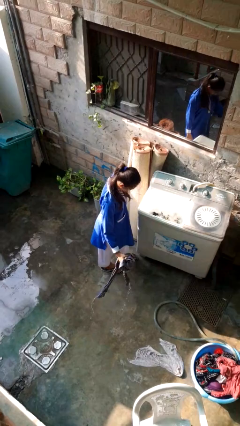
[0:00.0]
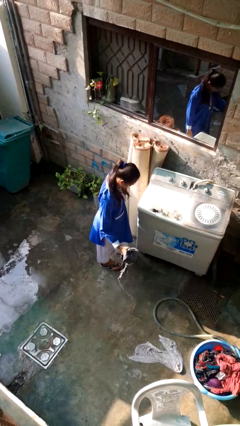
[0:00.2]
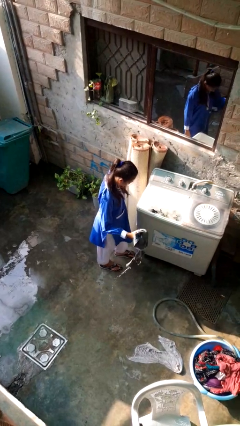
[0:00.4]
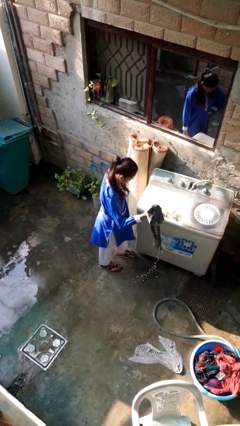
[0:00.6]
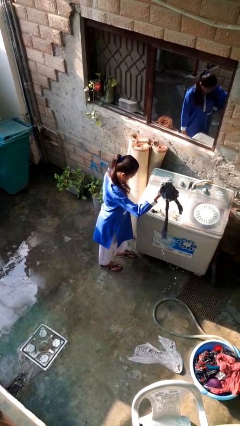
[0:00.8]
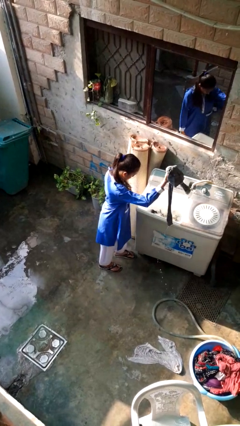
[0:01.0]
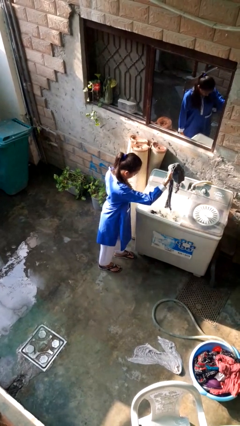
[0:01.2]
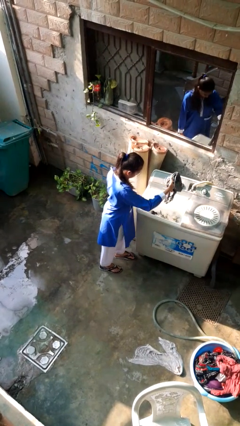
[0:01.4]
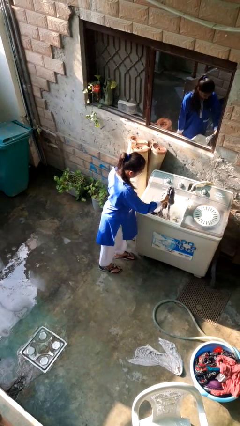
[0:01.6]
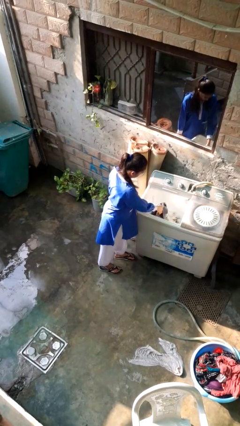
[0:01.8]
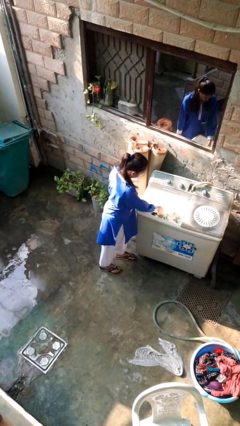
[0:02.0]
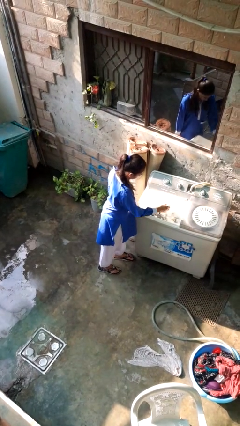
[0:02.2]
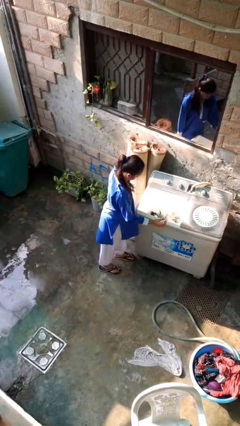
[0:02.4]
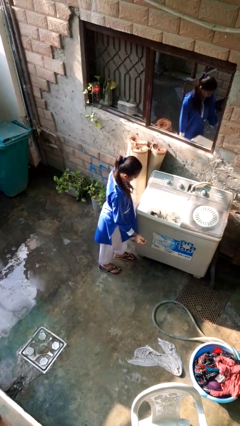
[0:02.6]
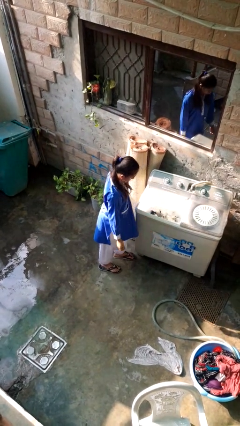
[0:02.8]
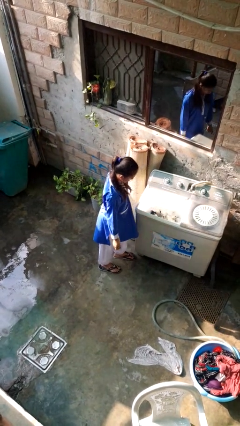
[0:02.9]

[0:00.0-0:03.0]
person loads clotheswasher

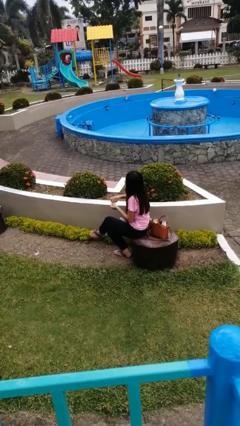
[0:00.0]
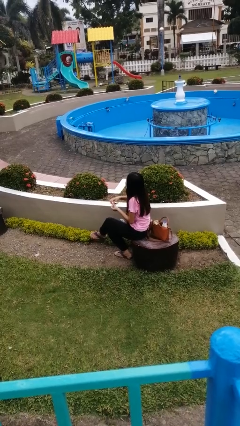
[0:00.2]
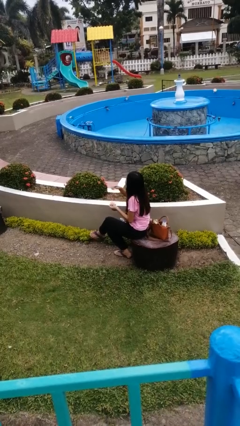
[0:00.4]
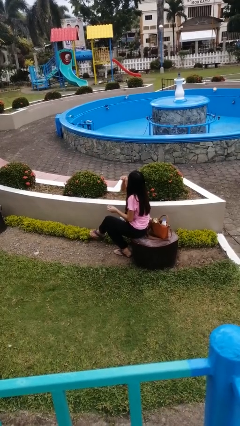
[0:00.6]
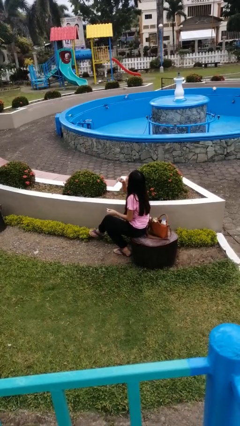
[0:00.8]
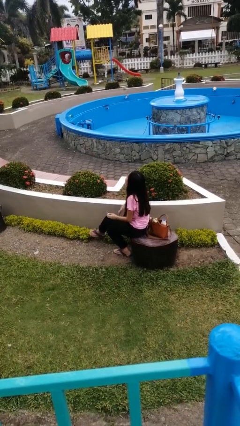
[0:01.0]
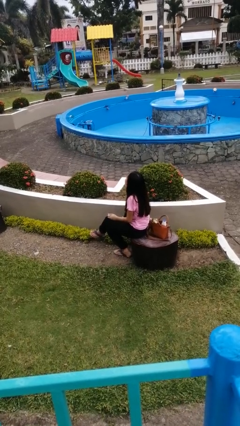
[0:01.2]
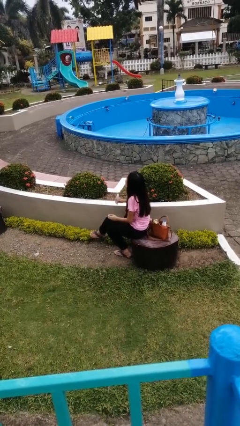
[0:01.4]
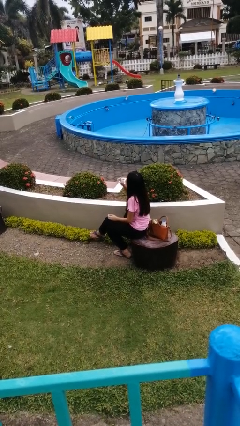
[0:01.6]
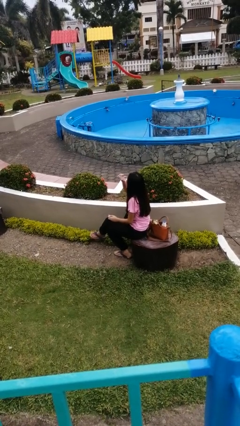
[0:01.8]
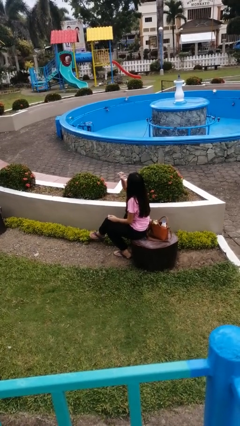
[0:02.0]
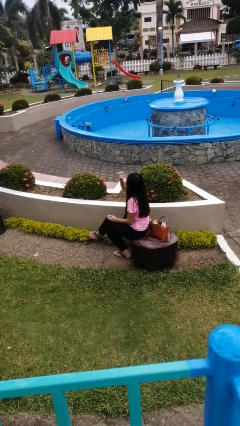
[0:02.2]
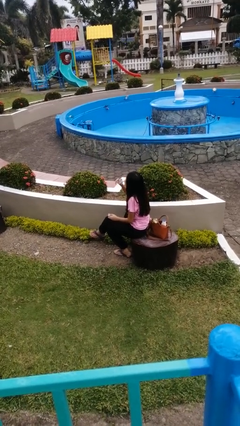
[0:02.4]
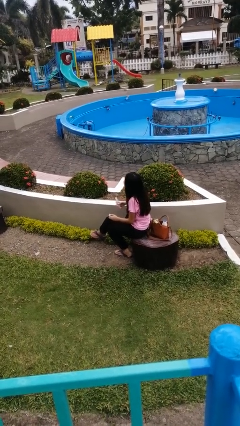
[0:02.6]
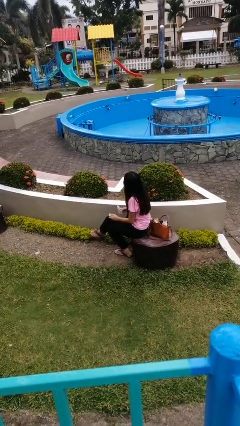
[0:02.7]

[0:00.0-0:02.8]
person drinks from cup

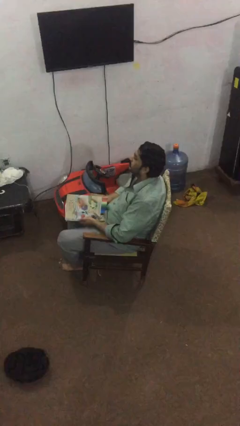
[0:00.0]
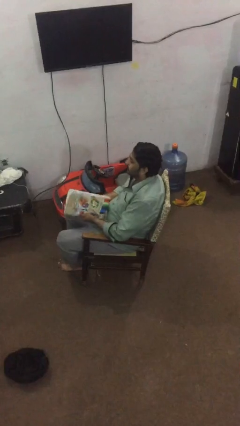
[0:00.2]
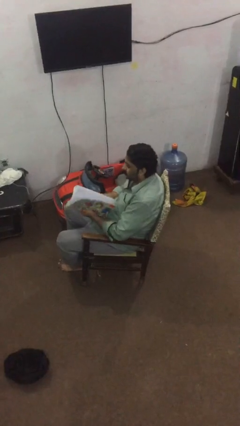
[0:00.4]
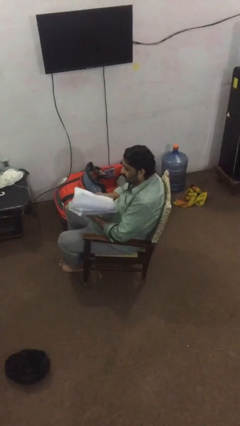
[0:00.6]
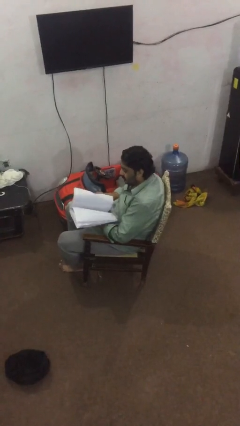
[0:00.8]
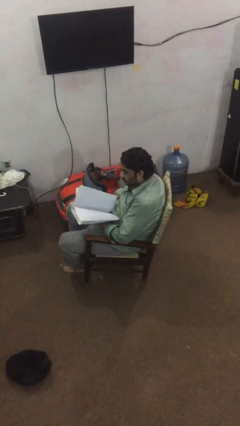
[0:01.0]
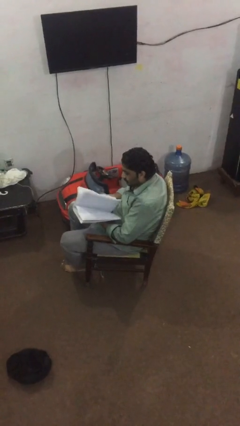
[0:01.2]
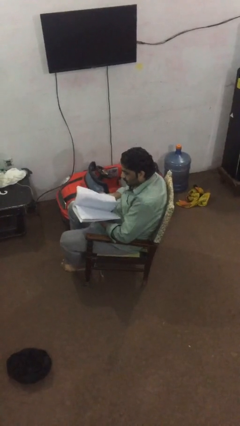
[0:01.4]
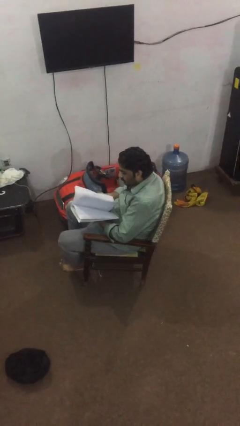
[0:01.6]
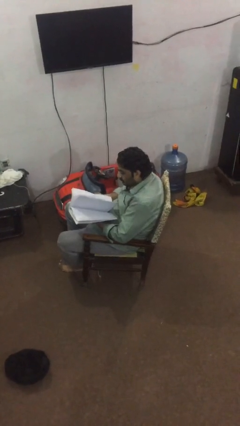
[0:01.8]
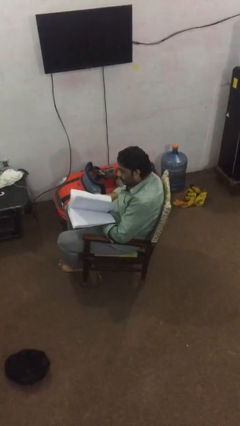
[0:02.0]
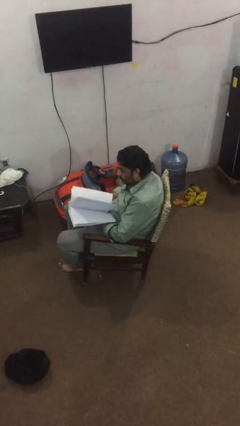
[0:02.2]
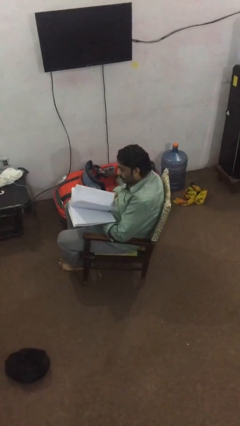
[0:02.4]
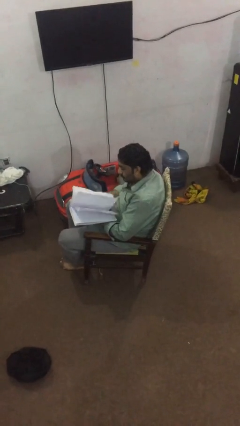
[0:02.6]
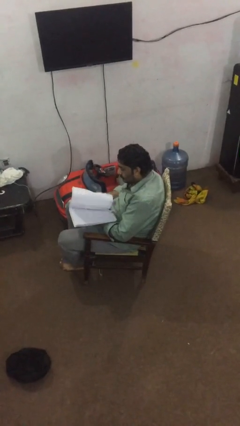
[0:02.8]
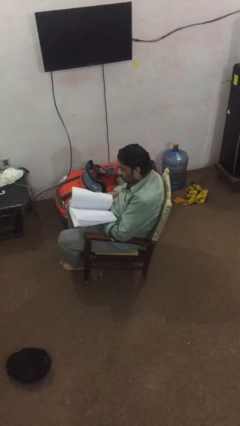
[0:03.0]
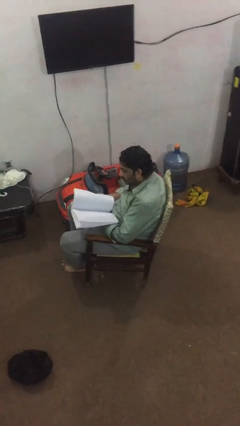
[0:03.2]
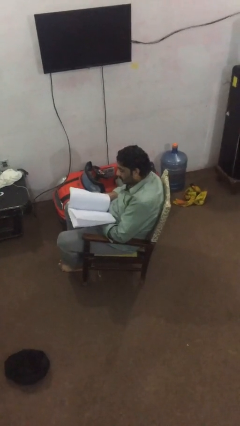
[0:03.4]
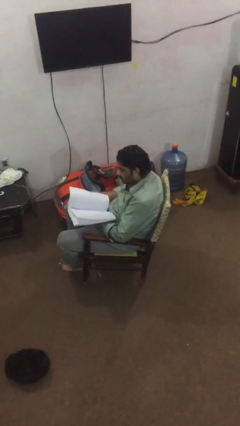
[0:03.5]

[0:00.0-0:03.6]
person reads document

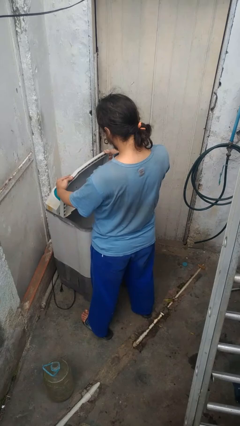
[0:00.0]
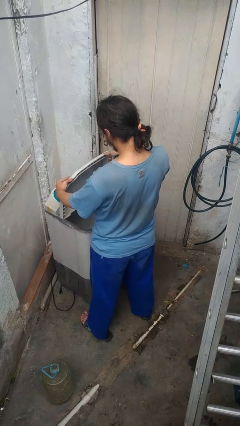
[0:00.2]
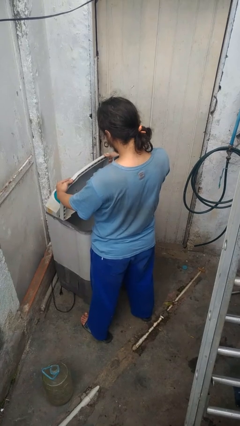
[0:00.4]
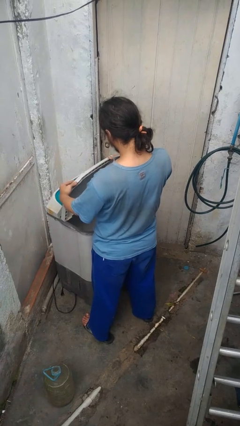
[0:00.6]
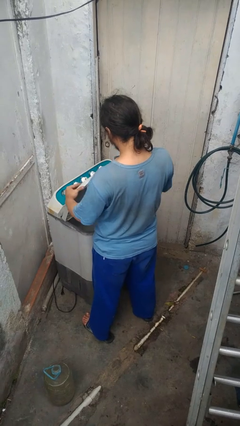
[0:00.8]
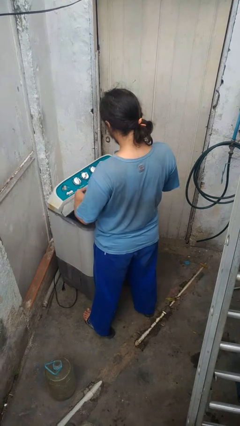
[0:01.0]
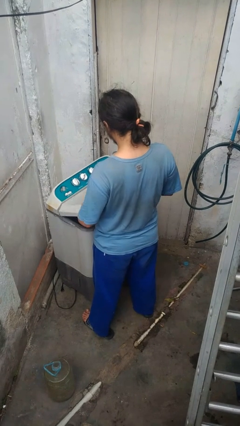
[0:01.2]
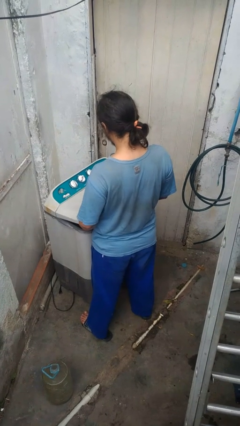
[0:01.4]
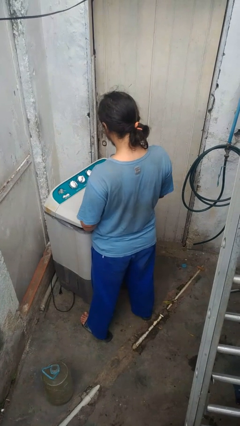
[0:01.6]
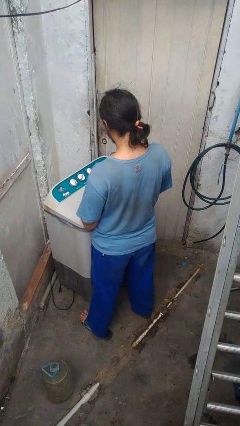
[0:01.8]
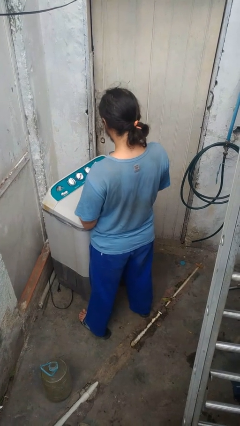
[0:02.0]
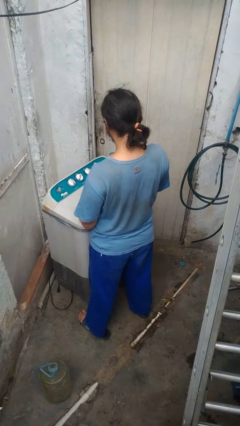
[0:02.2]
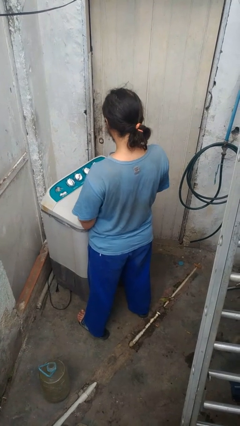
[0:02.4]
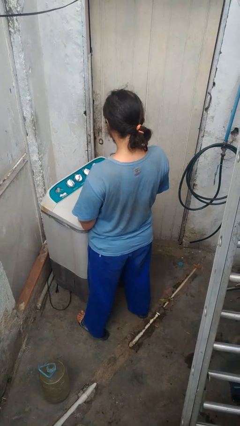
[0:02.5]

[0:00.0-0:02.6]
person closes clothes washer

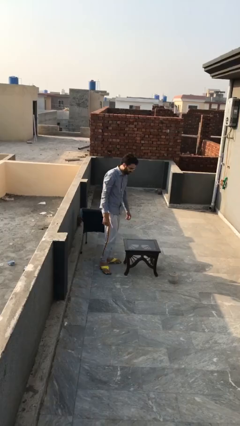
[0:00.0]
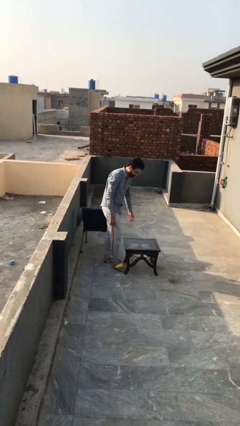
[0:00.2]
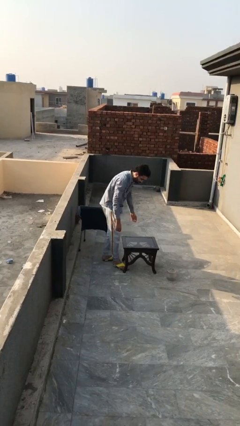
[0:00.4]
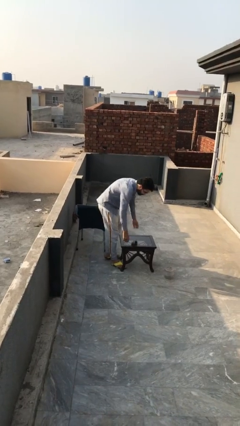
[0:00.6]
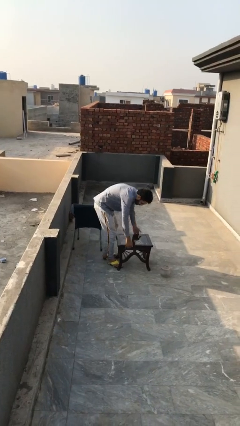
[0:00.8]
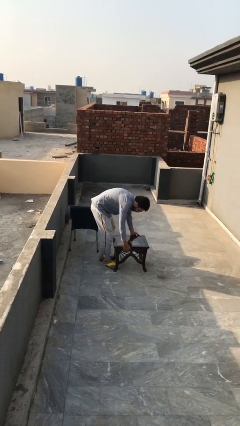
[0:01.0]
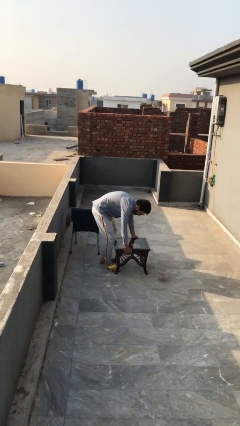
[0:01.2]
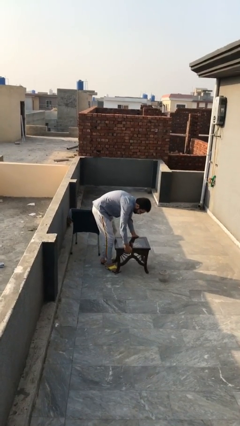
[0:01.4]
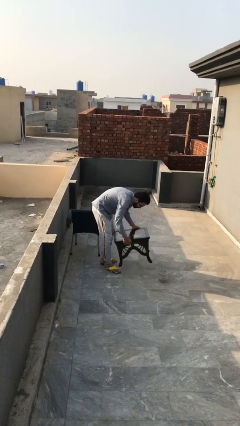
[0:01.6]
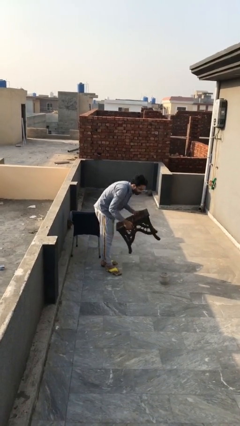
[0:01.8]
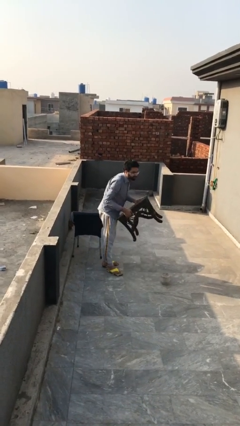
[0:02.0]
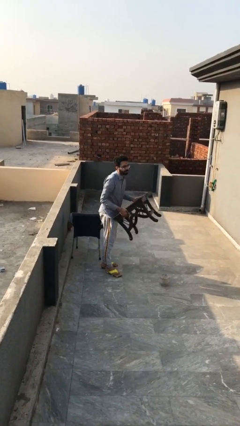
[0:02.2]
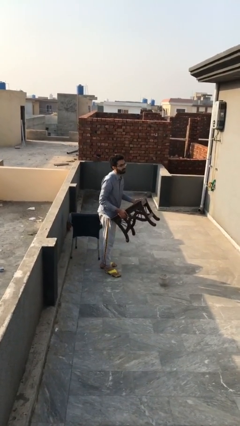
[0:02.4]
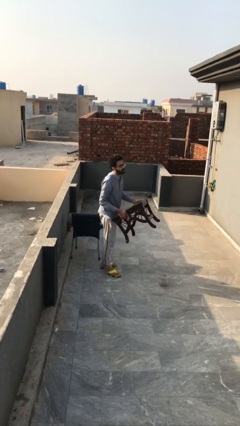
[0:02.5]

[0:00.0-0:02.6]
person picks up object from floor

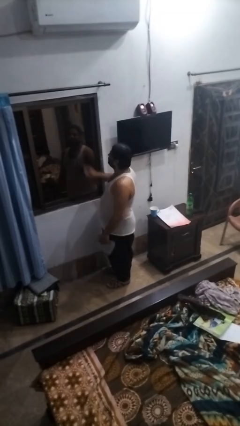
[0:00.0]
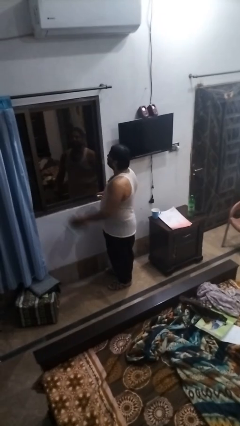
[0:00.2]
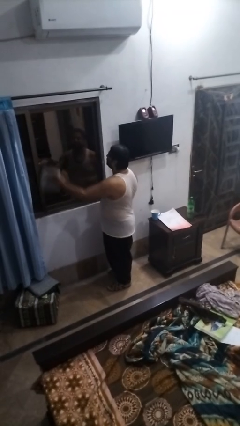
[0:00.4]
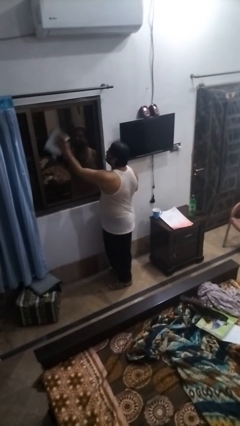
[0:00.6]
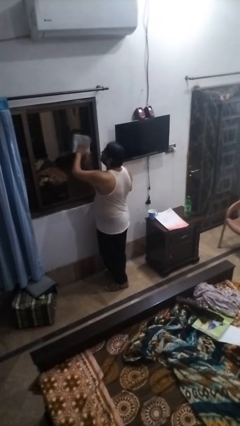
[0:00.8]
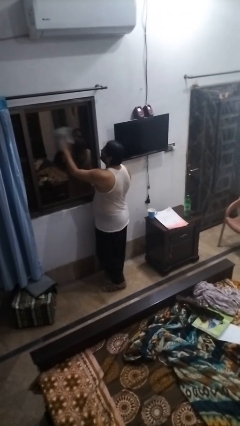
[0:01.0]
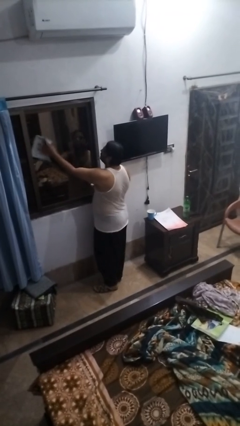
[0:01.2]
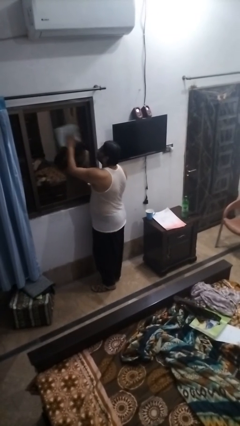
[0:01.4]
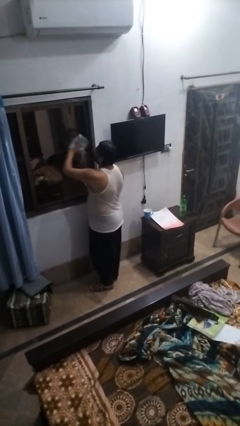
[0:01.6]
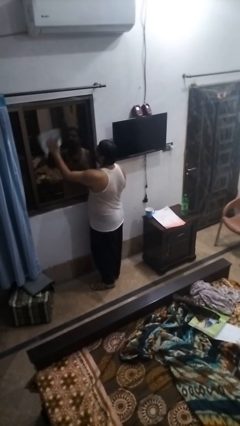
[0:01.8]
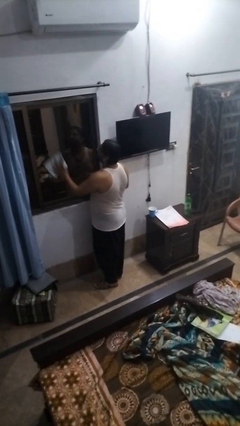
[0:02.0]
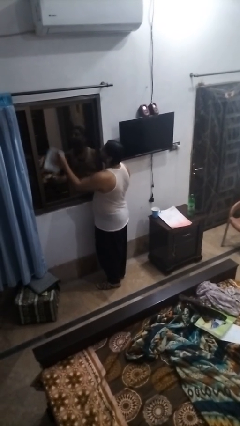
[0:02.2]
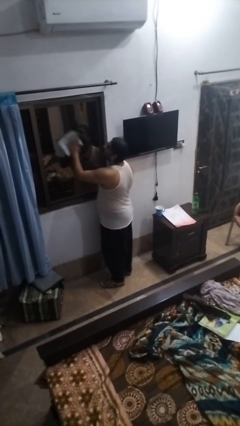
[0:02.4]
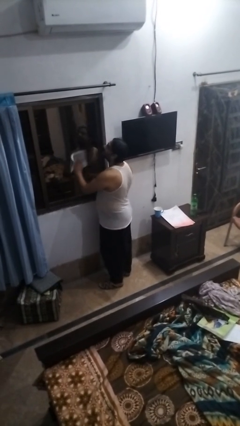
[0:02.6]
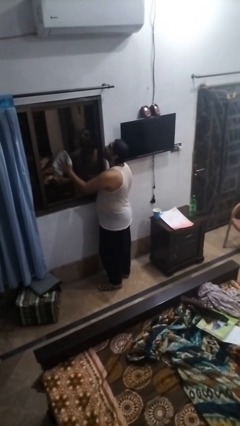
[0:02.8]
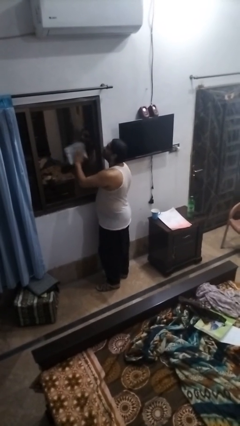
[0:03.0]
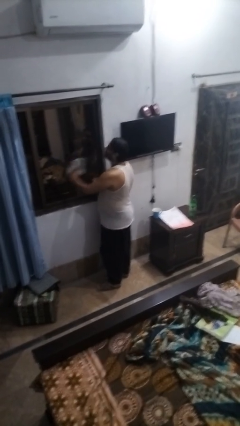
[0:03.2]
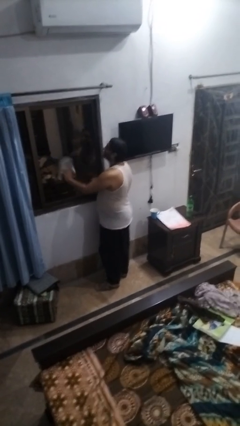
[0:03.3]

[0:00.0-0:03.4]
person washes window
